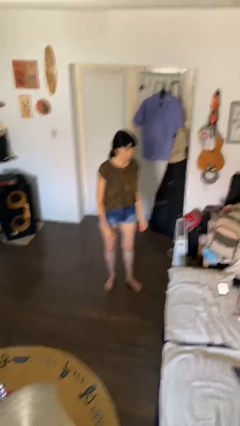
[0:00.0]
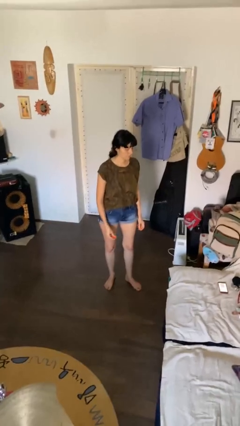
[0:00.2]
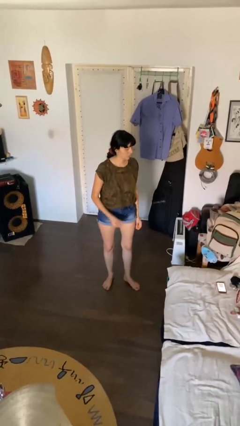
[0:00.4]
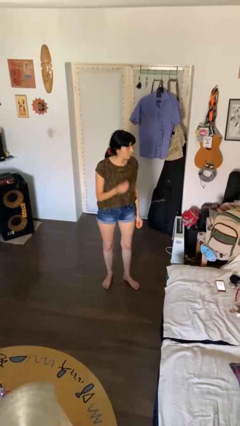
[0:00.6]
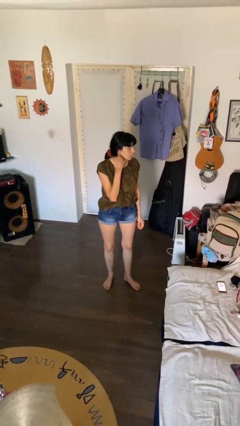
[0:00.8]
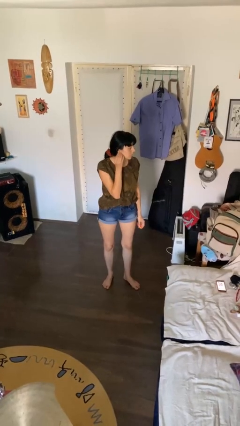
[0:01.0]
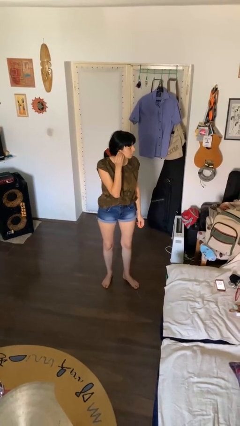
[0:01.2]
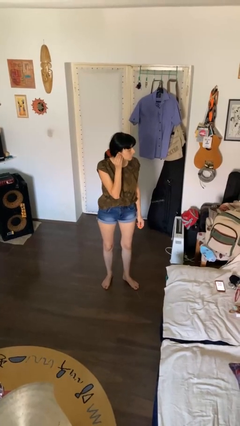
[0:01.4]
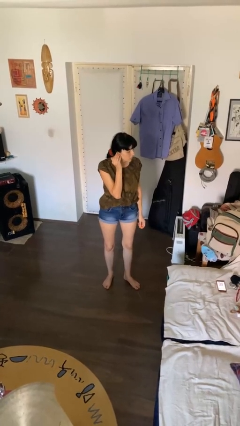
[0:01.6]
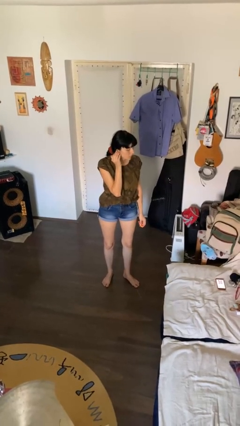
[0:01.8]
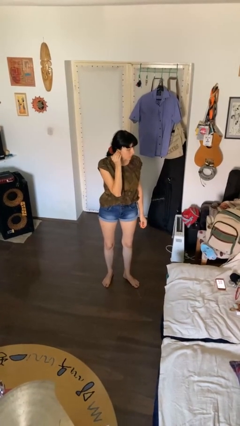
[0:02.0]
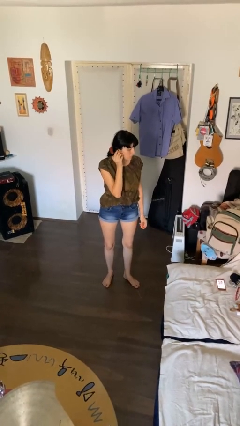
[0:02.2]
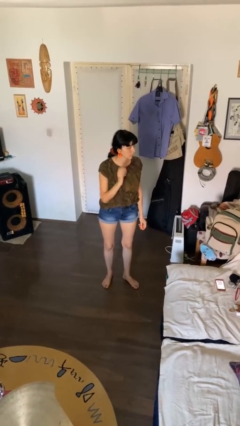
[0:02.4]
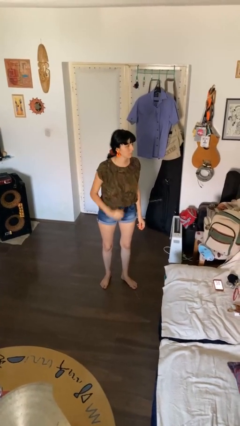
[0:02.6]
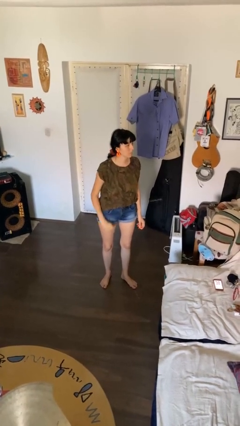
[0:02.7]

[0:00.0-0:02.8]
person puts on earrings

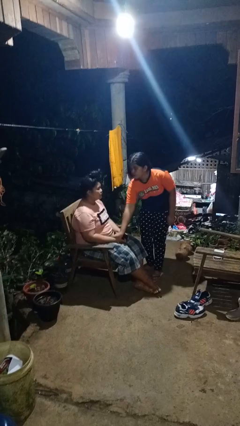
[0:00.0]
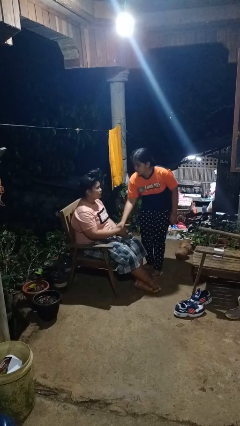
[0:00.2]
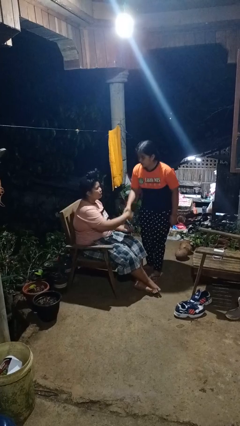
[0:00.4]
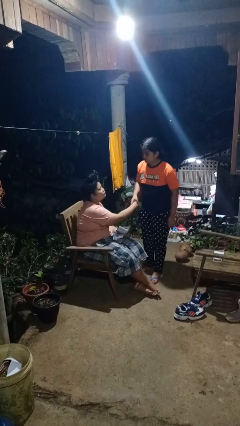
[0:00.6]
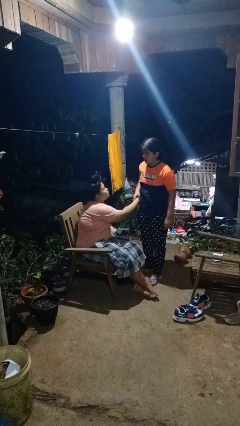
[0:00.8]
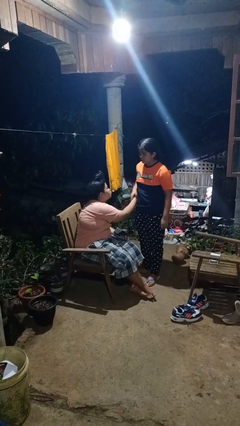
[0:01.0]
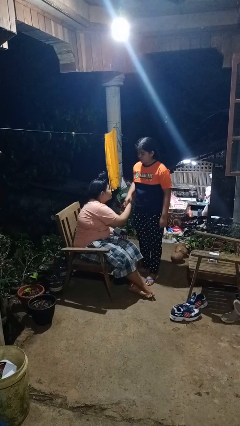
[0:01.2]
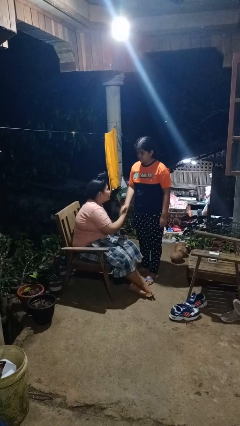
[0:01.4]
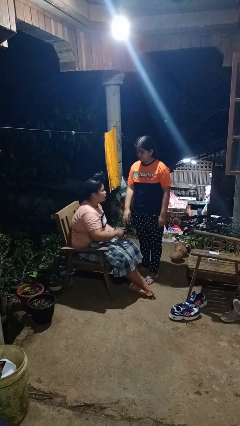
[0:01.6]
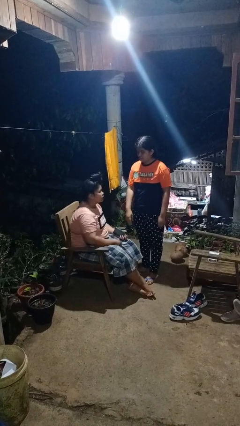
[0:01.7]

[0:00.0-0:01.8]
person grabs person by forearm

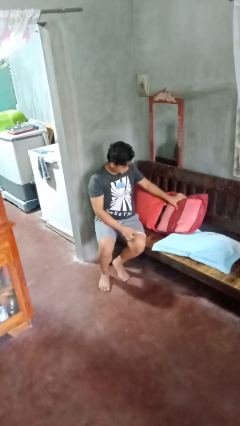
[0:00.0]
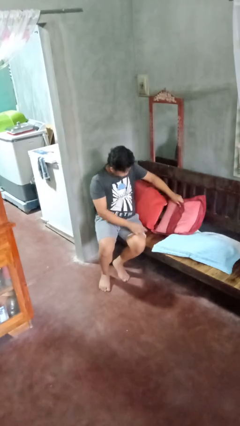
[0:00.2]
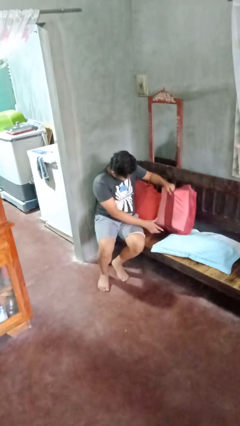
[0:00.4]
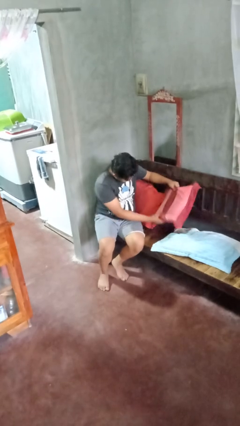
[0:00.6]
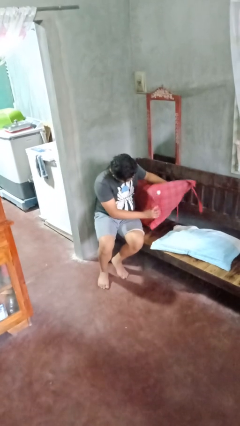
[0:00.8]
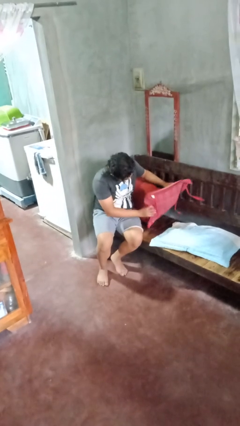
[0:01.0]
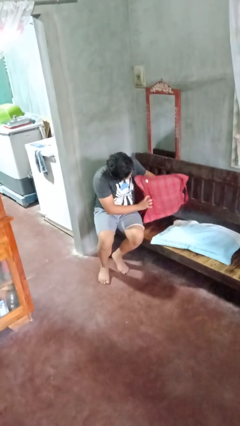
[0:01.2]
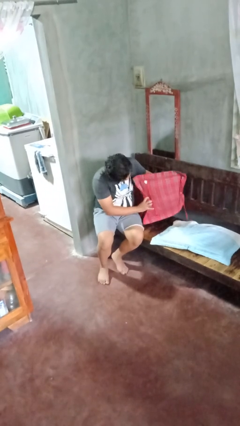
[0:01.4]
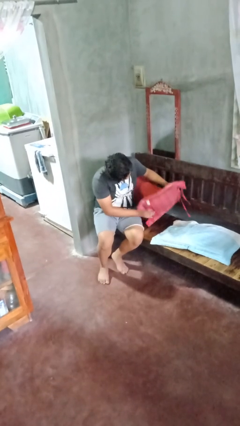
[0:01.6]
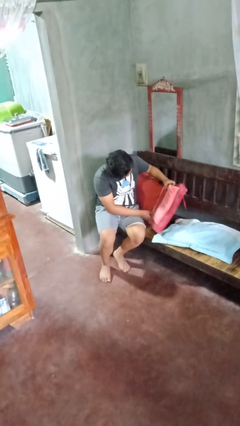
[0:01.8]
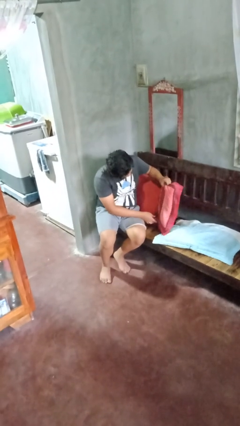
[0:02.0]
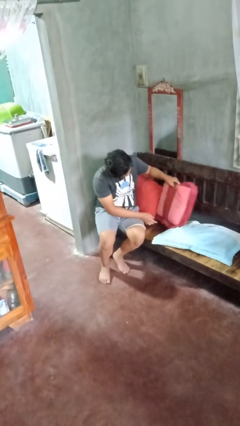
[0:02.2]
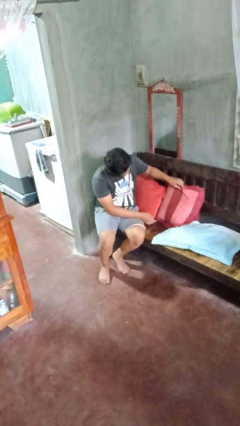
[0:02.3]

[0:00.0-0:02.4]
person searches in couch

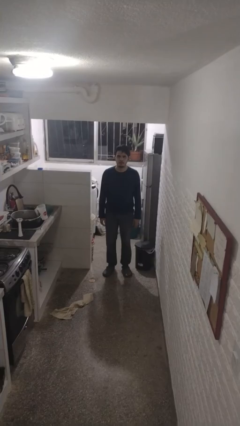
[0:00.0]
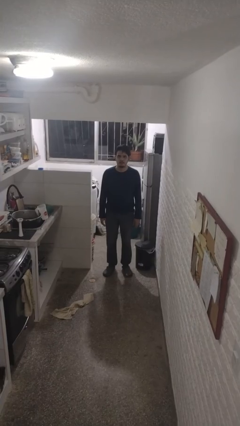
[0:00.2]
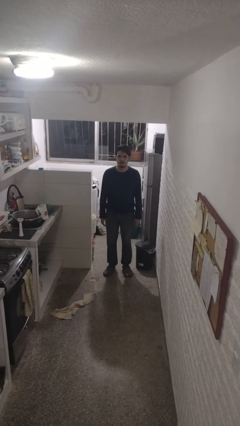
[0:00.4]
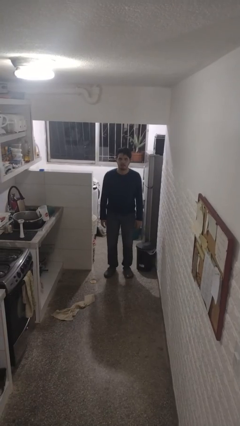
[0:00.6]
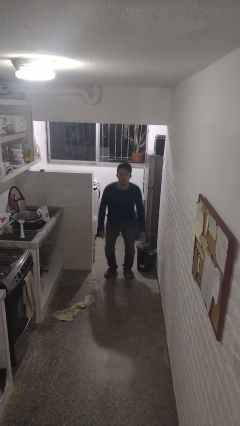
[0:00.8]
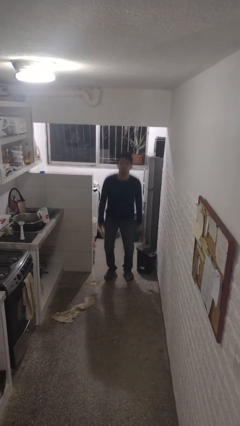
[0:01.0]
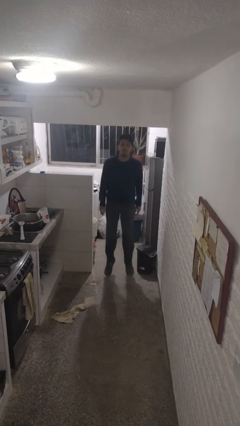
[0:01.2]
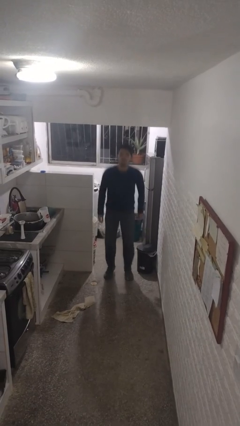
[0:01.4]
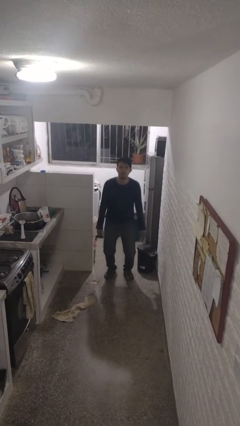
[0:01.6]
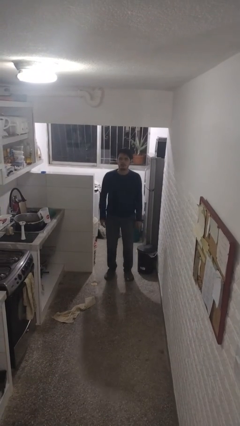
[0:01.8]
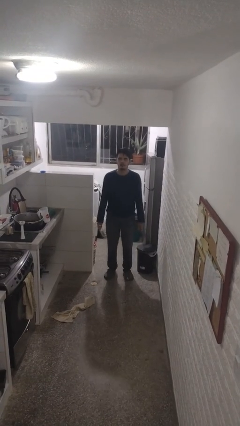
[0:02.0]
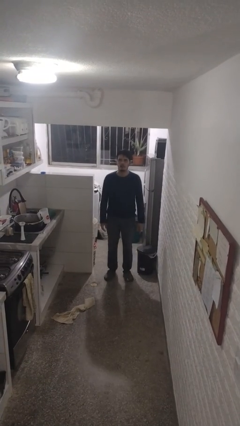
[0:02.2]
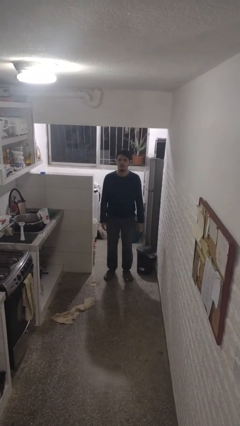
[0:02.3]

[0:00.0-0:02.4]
person jumps

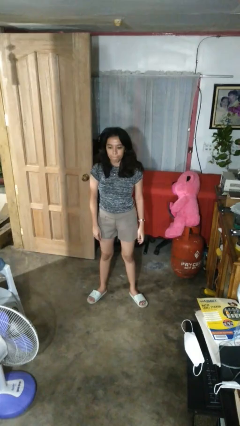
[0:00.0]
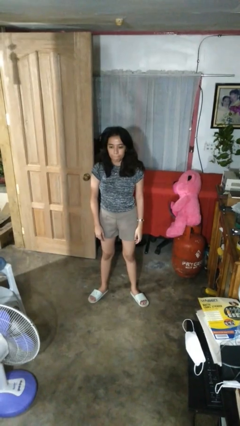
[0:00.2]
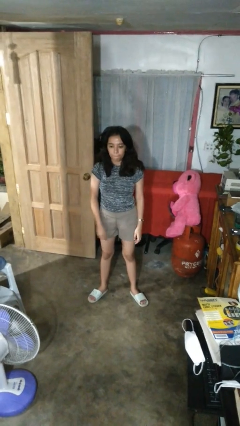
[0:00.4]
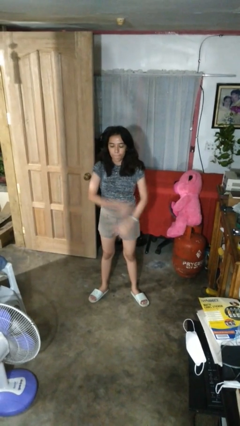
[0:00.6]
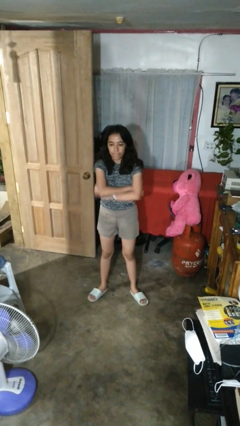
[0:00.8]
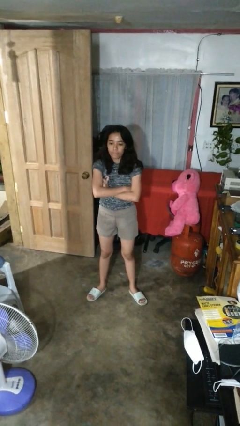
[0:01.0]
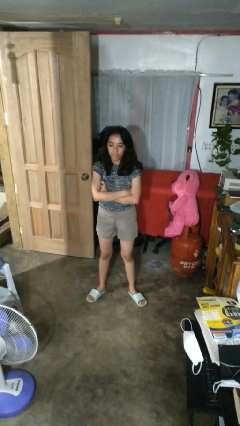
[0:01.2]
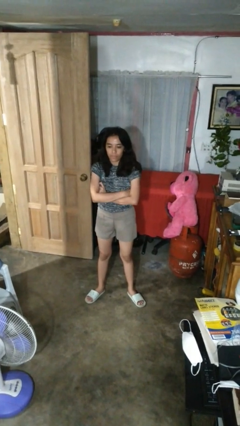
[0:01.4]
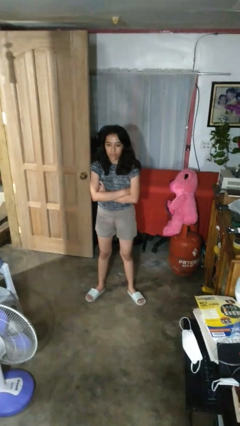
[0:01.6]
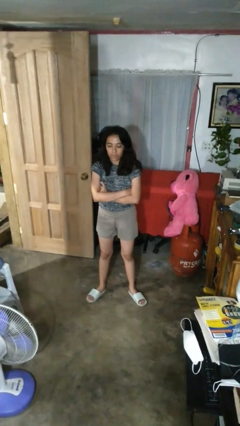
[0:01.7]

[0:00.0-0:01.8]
person crosses arms

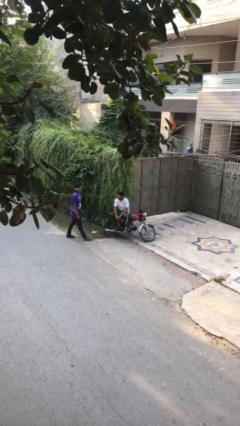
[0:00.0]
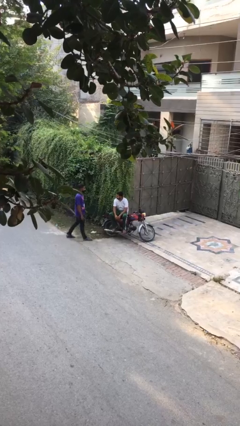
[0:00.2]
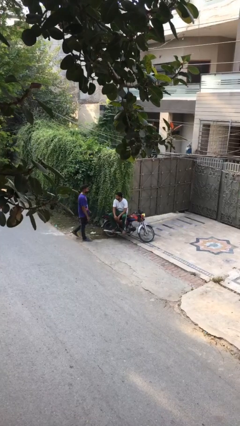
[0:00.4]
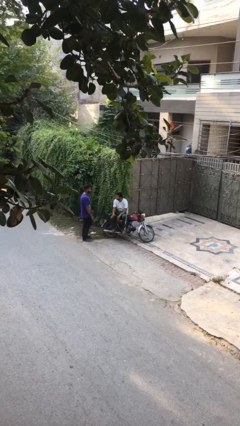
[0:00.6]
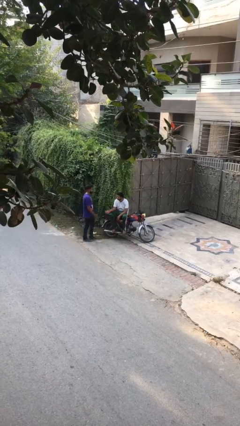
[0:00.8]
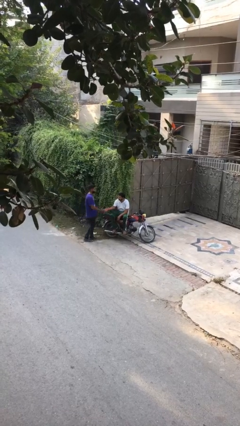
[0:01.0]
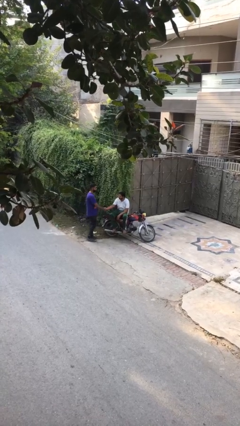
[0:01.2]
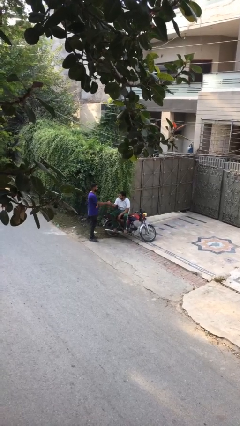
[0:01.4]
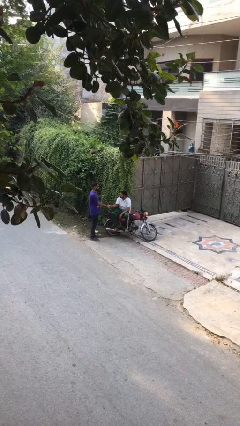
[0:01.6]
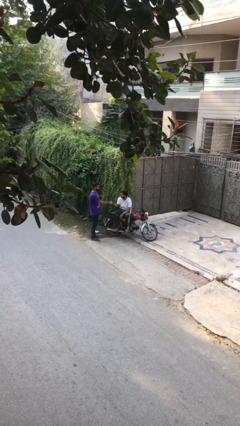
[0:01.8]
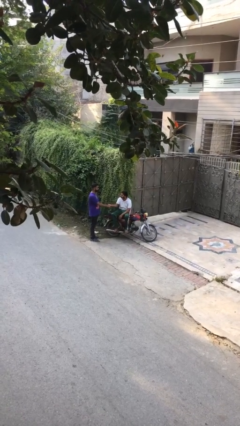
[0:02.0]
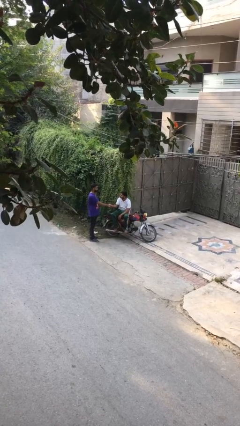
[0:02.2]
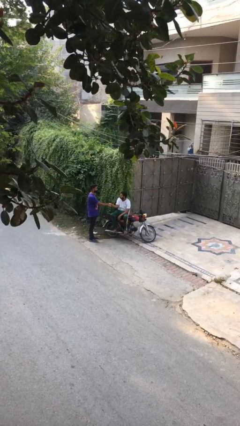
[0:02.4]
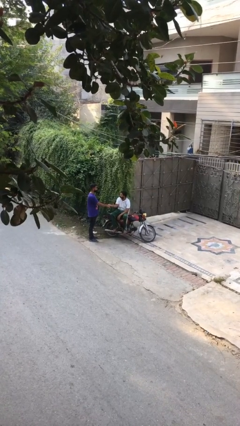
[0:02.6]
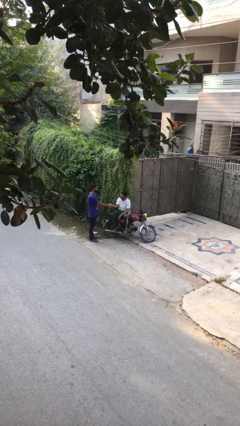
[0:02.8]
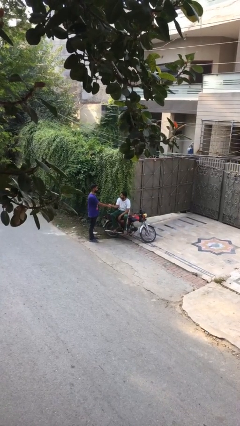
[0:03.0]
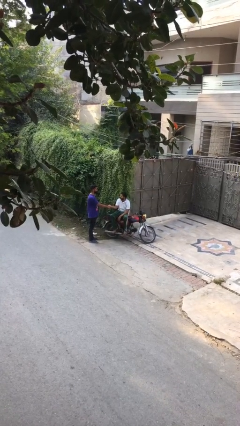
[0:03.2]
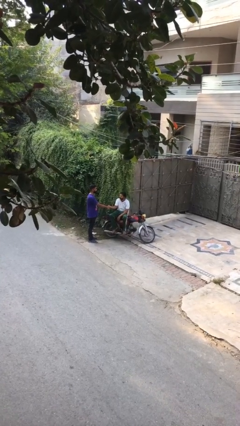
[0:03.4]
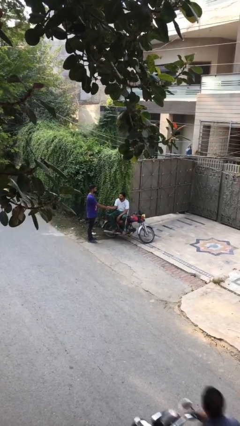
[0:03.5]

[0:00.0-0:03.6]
person shakes hand

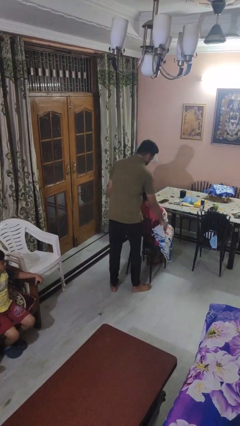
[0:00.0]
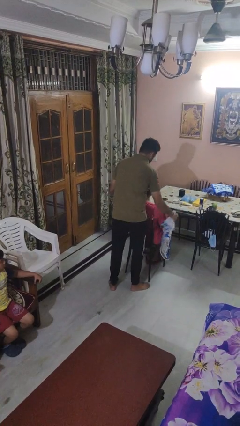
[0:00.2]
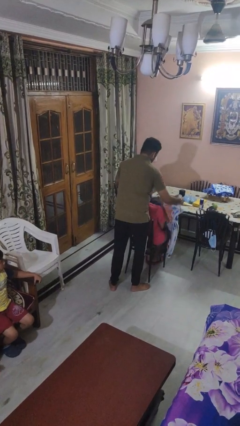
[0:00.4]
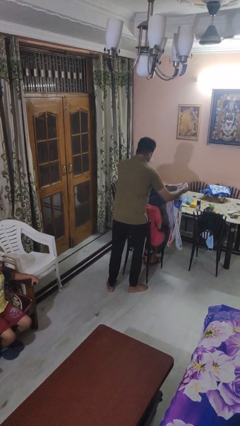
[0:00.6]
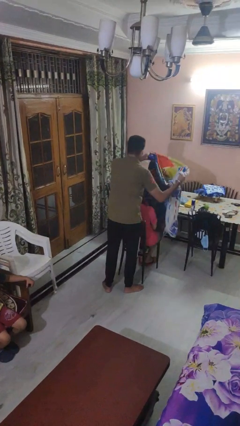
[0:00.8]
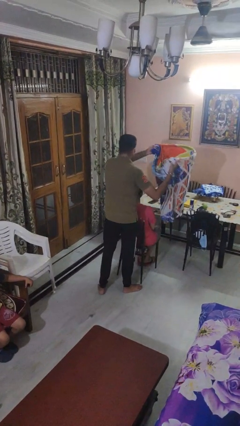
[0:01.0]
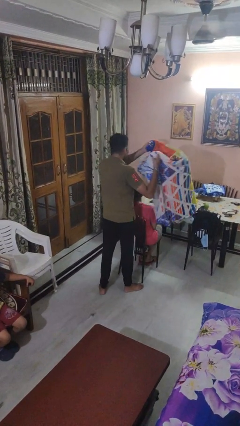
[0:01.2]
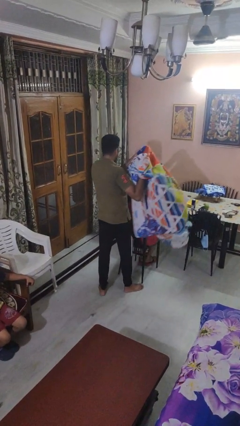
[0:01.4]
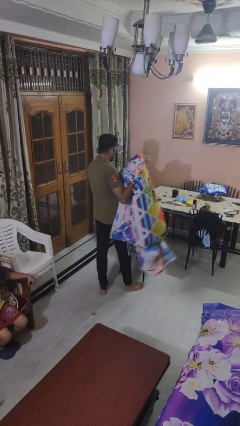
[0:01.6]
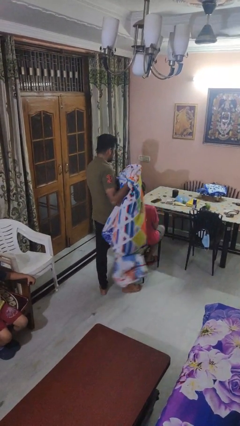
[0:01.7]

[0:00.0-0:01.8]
person uncovers friend with blanket
